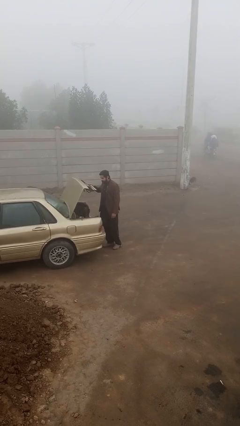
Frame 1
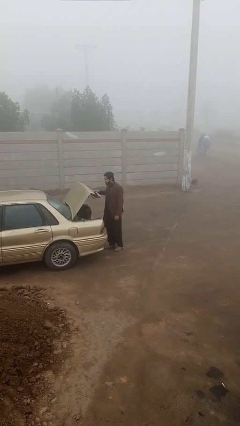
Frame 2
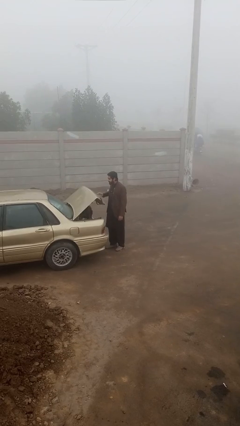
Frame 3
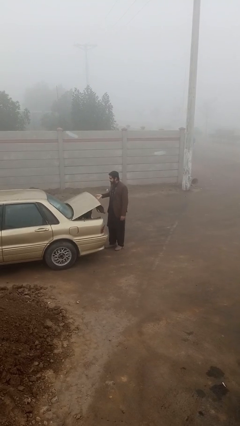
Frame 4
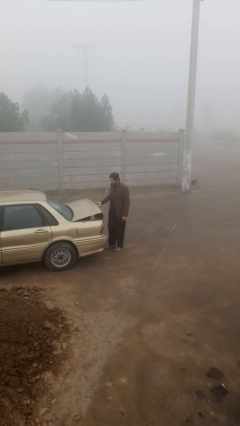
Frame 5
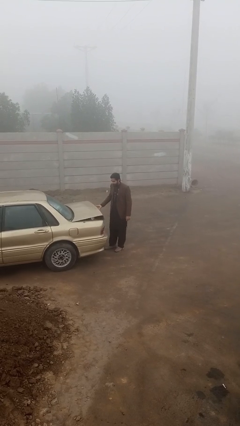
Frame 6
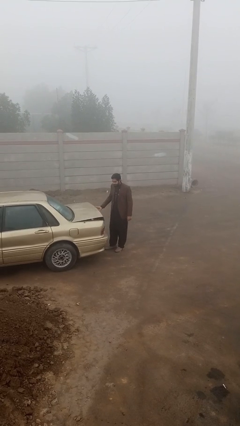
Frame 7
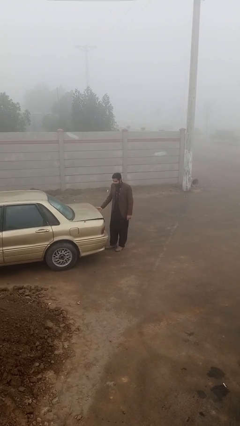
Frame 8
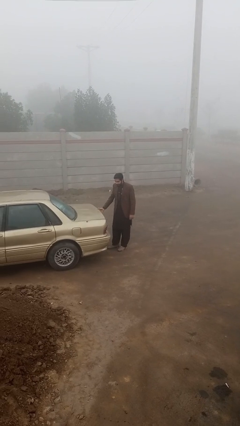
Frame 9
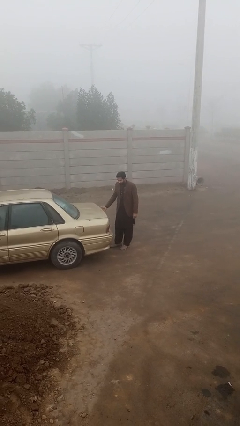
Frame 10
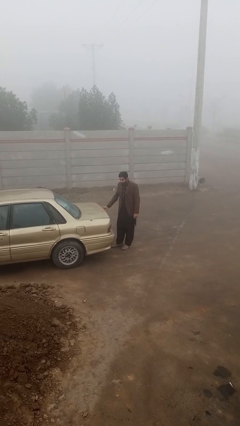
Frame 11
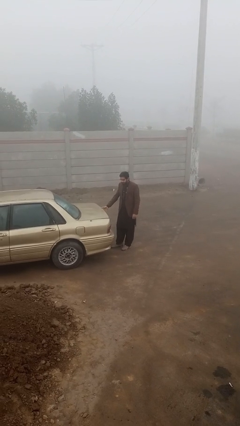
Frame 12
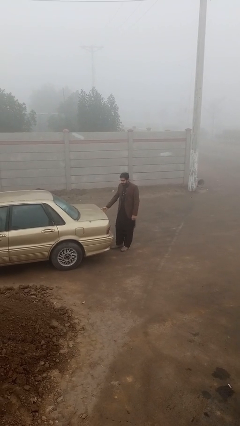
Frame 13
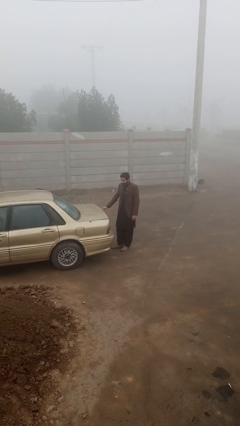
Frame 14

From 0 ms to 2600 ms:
person closes car trunk

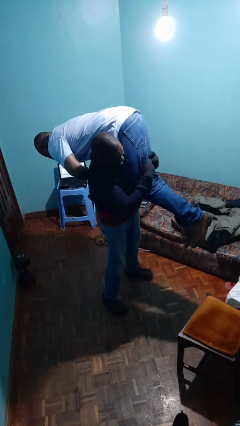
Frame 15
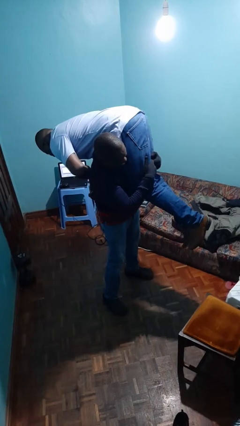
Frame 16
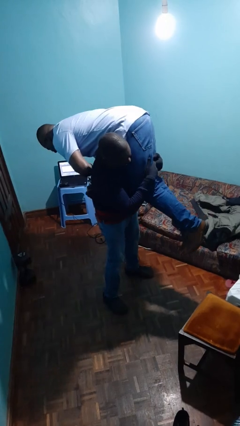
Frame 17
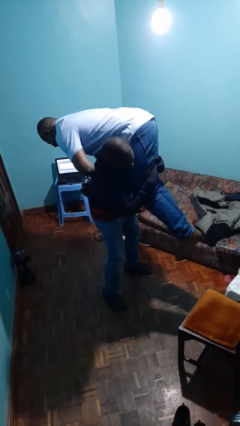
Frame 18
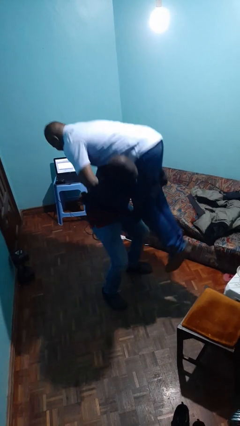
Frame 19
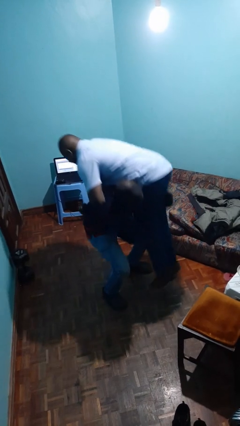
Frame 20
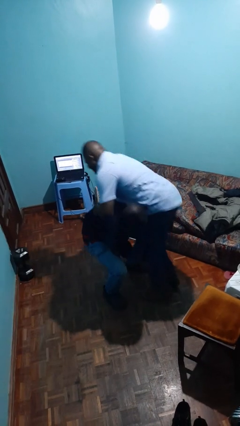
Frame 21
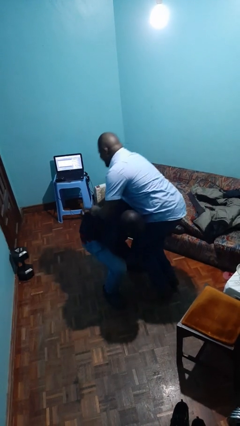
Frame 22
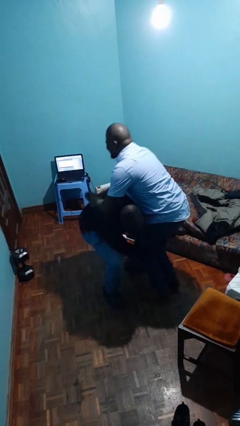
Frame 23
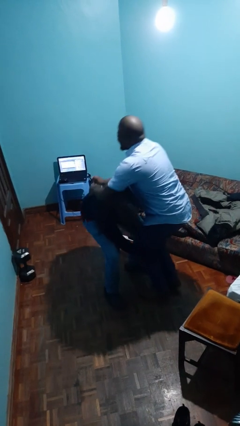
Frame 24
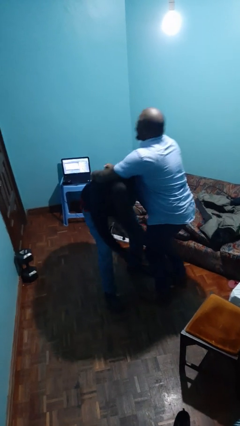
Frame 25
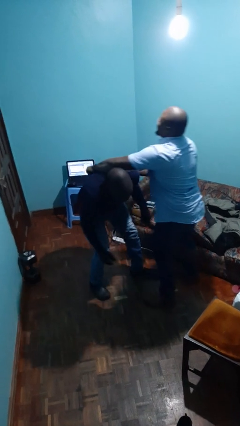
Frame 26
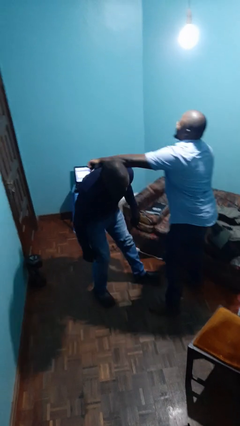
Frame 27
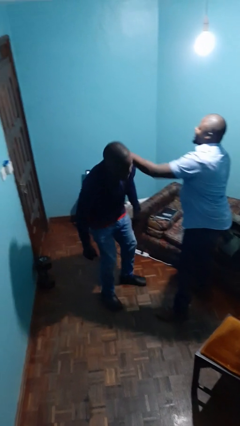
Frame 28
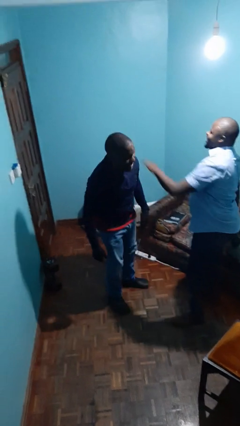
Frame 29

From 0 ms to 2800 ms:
person puts down person

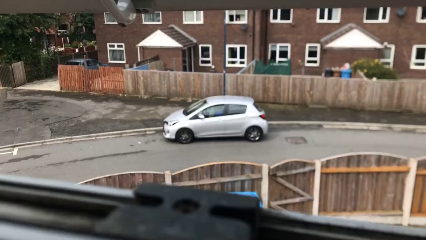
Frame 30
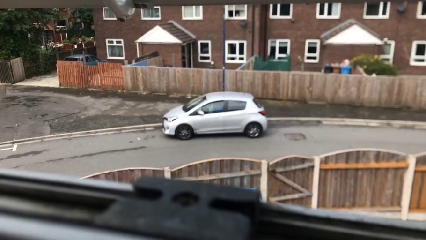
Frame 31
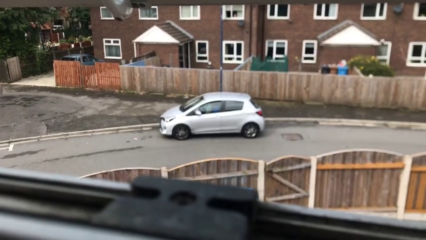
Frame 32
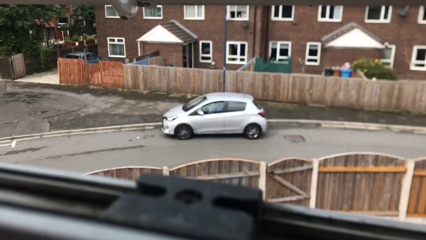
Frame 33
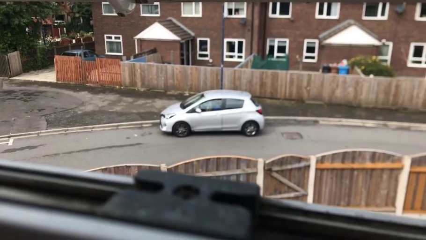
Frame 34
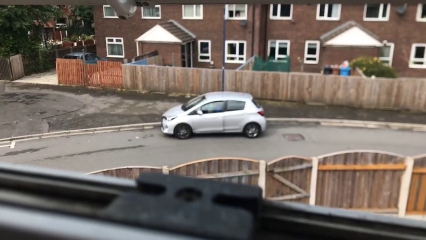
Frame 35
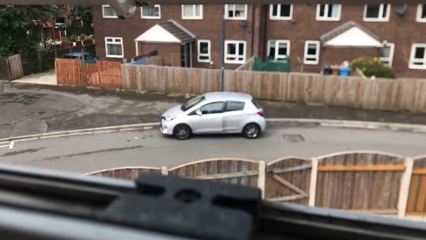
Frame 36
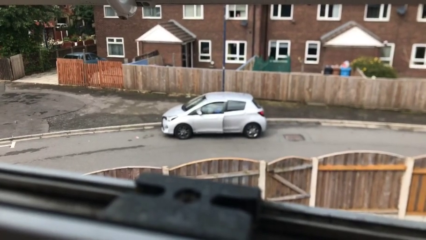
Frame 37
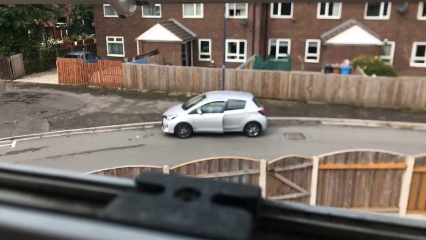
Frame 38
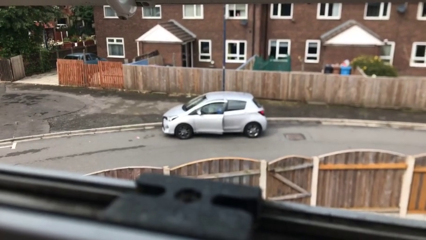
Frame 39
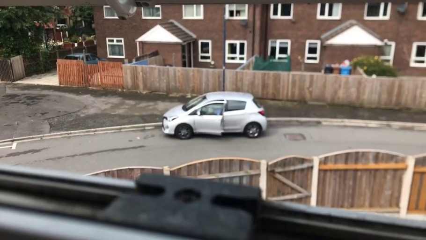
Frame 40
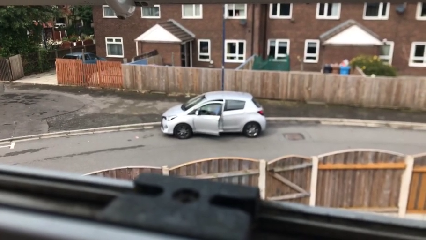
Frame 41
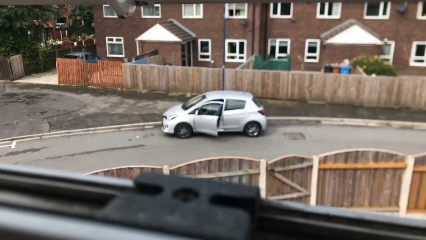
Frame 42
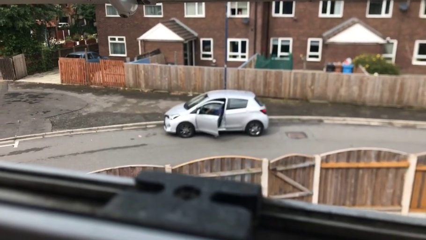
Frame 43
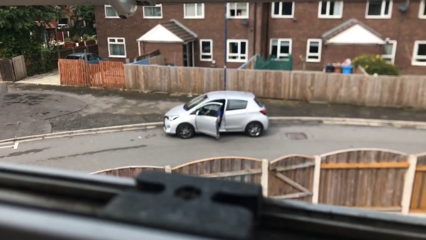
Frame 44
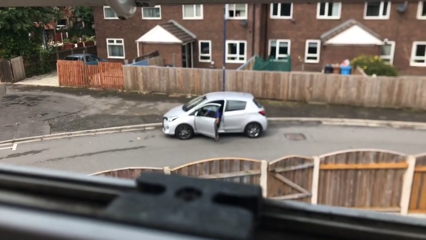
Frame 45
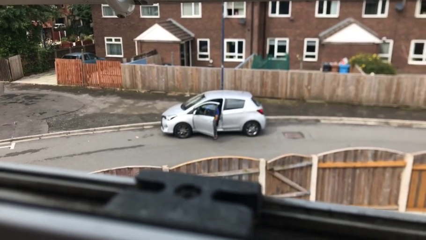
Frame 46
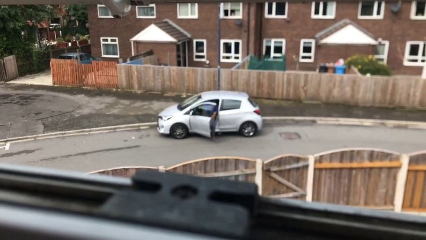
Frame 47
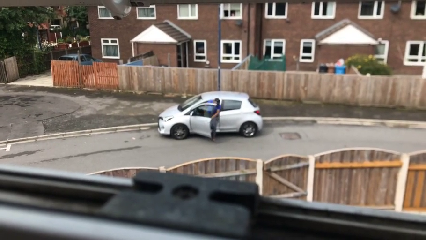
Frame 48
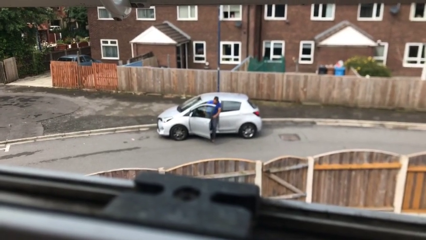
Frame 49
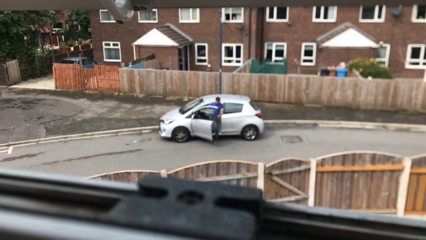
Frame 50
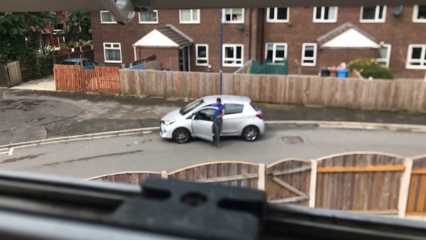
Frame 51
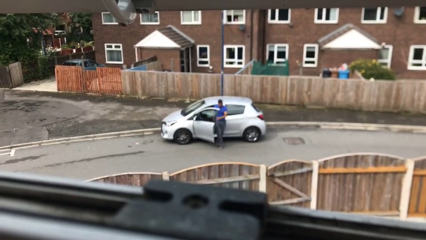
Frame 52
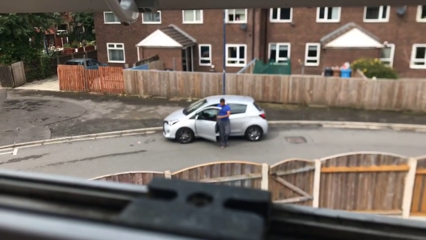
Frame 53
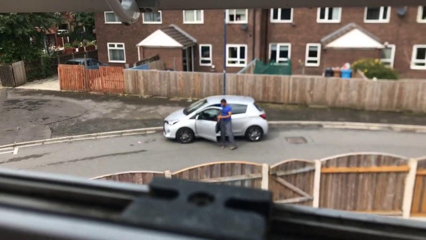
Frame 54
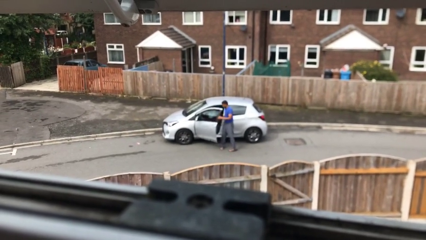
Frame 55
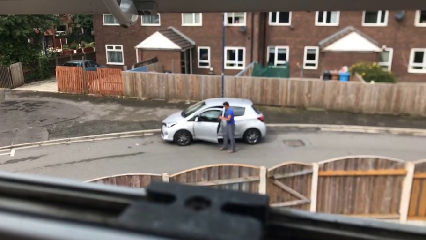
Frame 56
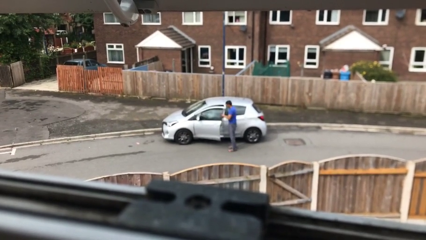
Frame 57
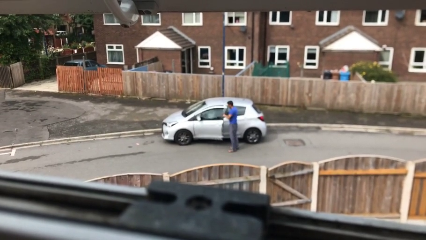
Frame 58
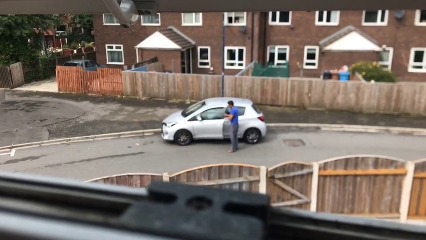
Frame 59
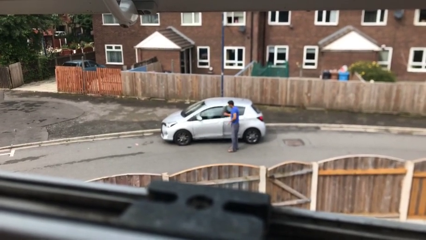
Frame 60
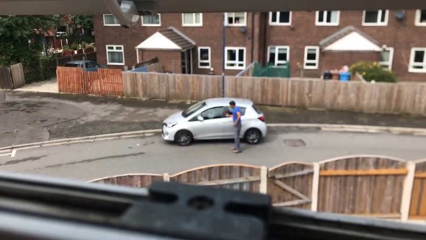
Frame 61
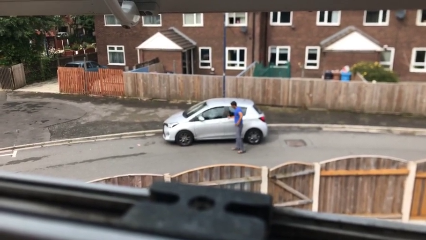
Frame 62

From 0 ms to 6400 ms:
car drops off person

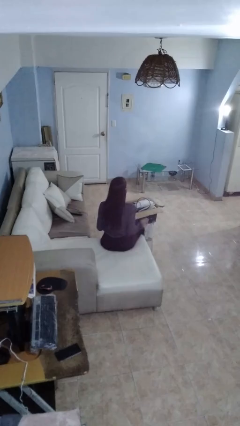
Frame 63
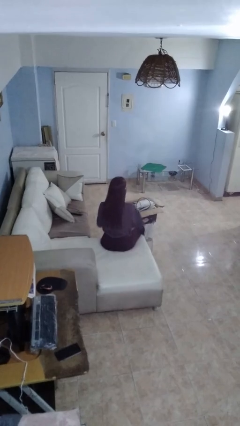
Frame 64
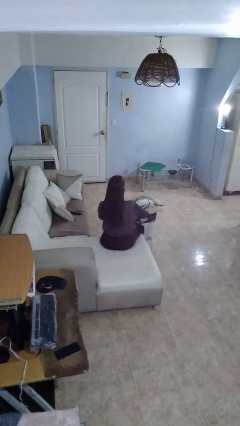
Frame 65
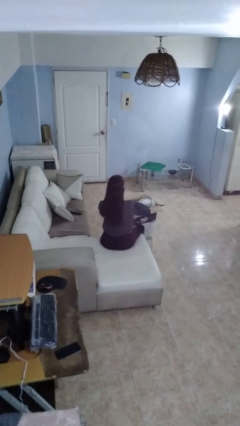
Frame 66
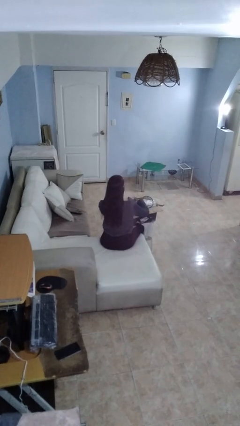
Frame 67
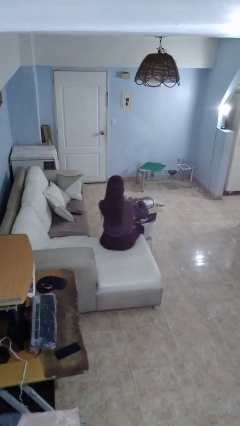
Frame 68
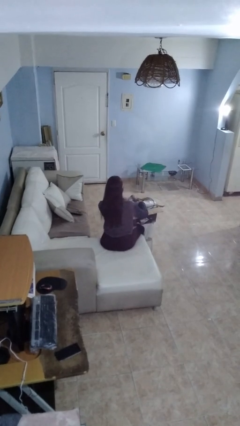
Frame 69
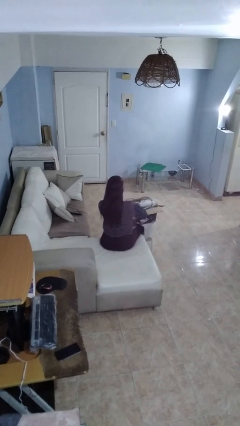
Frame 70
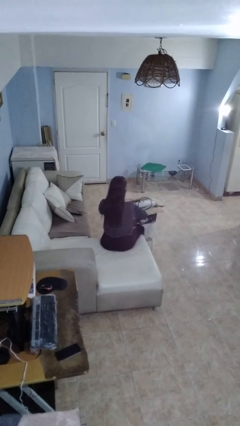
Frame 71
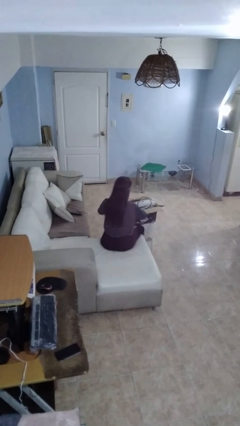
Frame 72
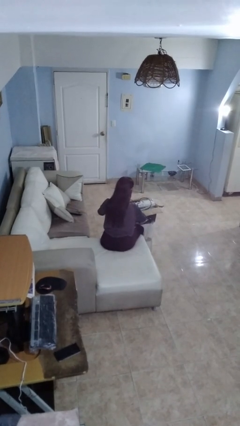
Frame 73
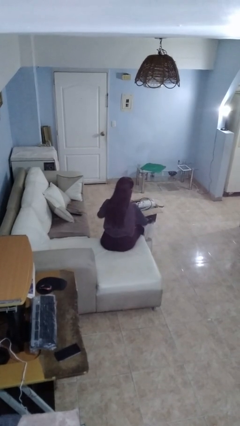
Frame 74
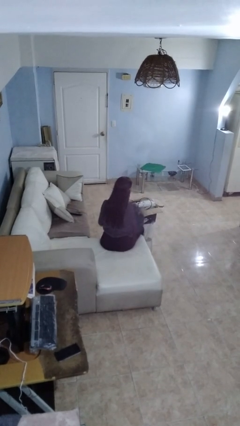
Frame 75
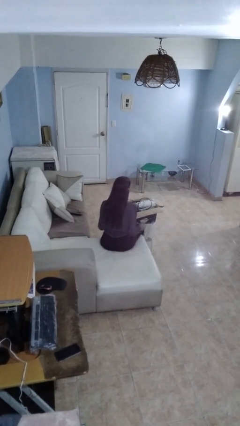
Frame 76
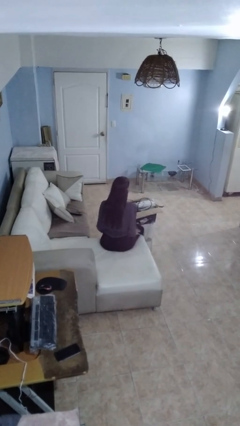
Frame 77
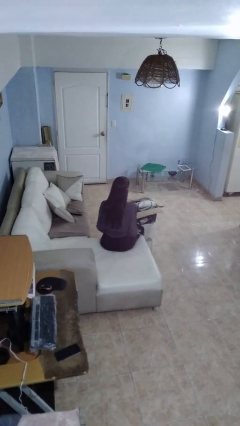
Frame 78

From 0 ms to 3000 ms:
person searches in box

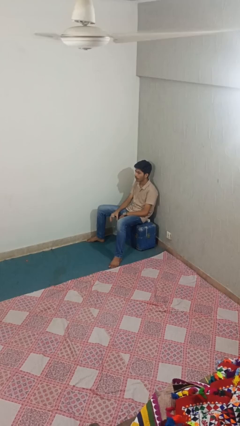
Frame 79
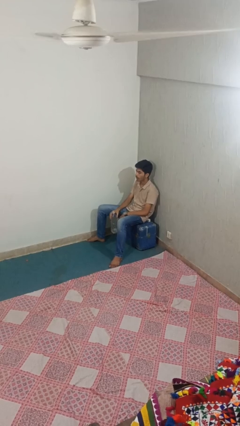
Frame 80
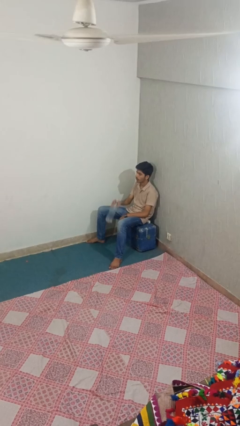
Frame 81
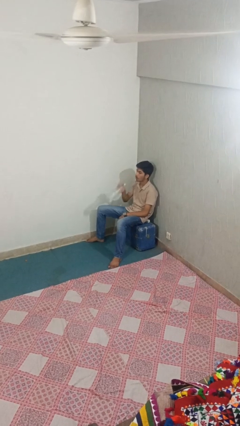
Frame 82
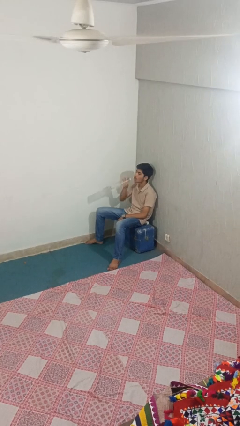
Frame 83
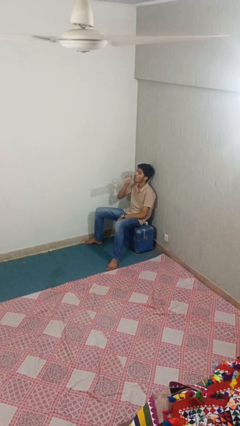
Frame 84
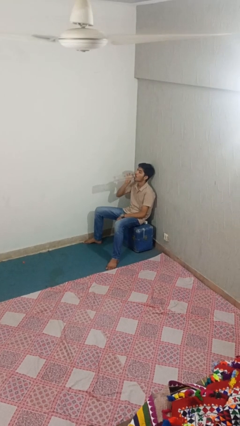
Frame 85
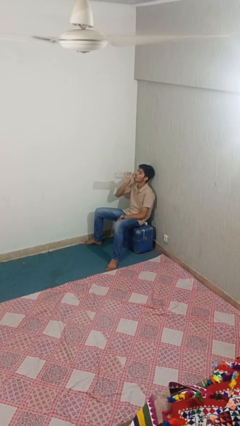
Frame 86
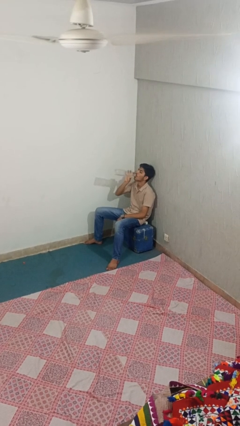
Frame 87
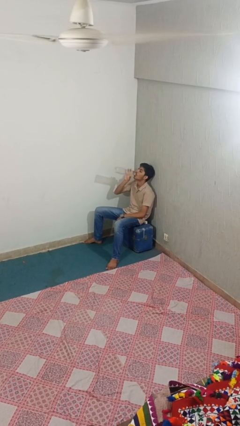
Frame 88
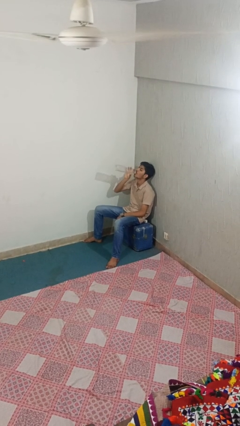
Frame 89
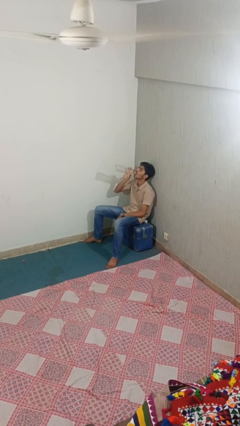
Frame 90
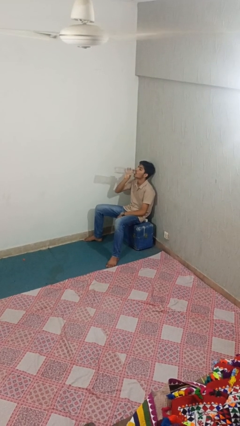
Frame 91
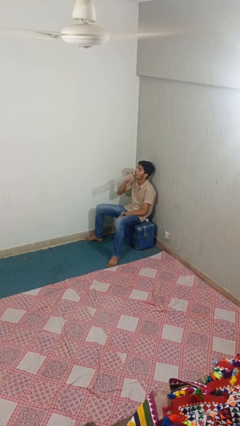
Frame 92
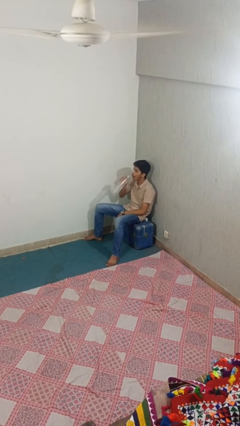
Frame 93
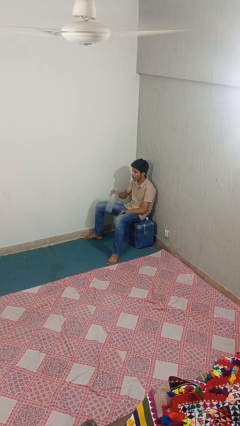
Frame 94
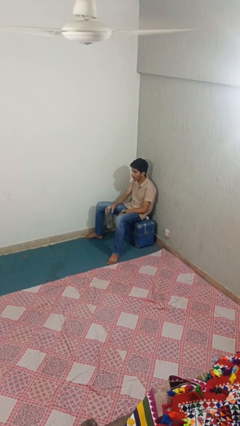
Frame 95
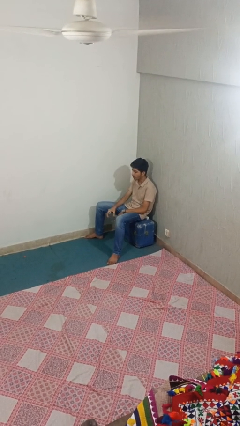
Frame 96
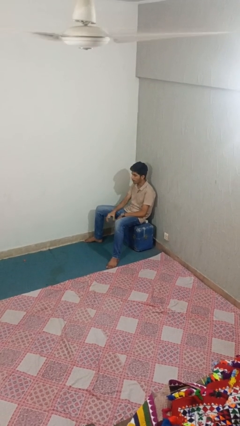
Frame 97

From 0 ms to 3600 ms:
person drinks from bottle
